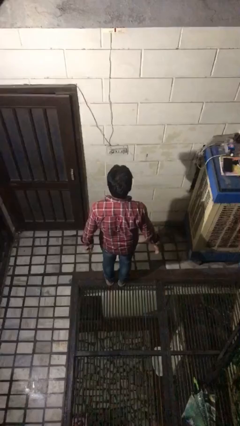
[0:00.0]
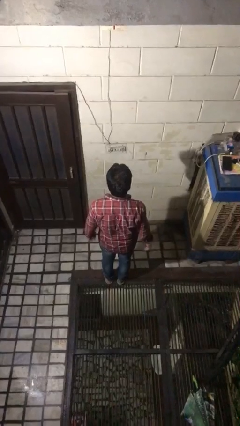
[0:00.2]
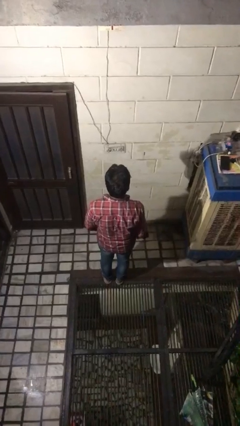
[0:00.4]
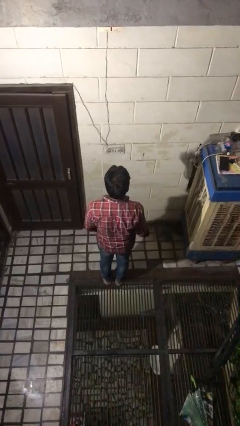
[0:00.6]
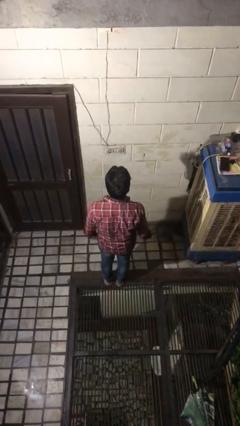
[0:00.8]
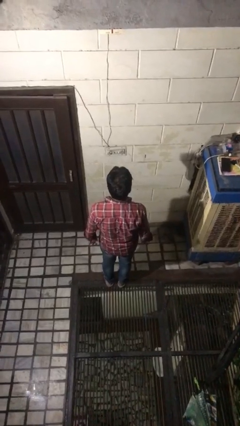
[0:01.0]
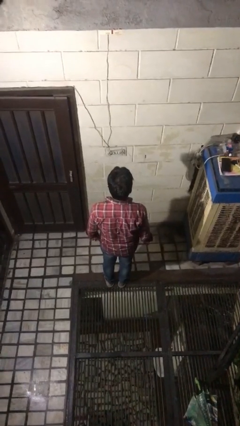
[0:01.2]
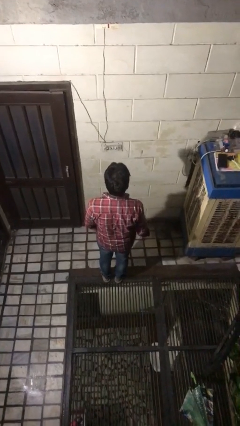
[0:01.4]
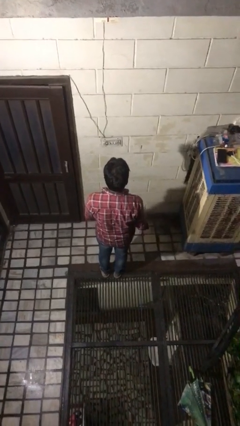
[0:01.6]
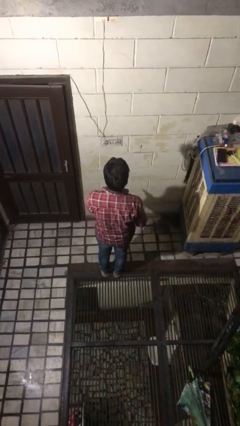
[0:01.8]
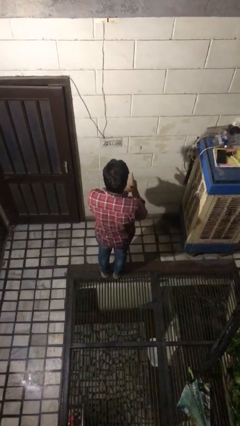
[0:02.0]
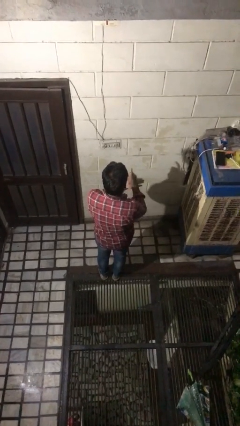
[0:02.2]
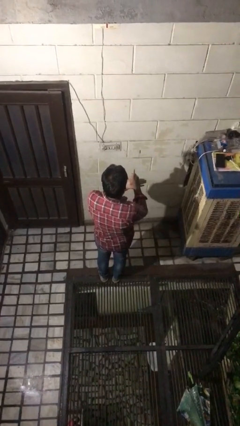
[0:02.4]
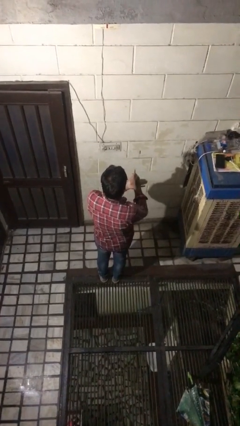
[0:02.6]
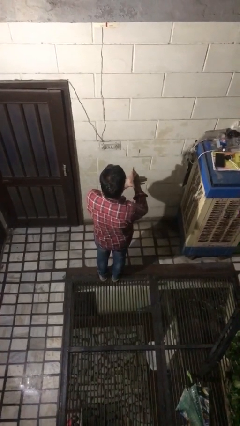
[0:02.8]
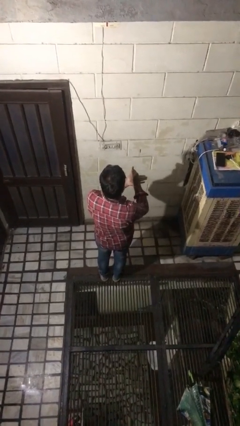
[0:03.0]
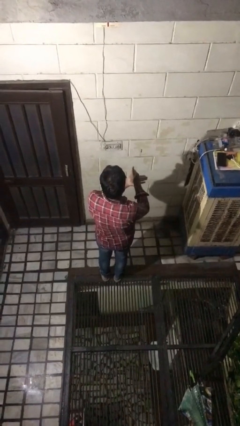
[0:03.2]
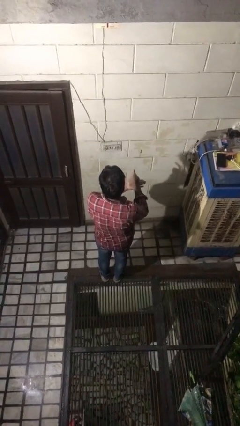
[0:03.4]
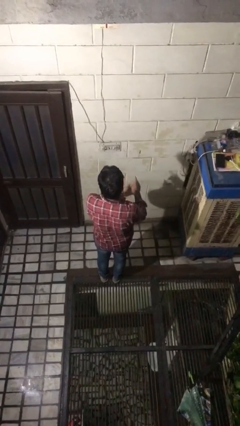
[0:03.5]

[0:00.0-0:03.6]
person gestures number one

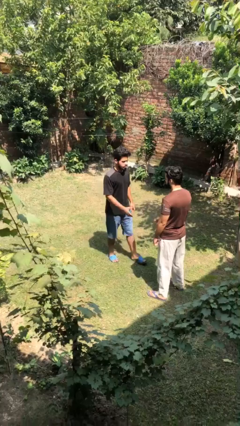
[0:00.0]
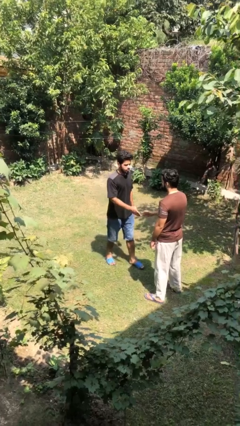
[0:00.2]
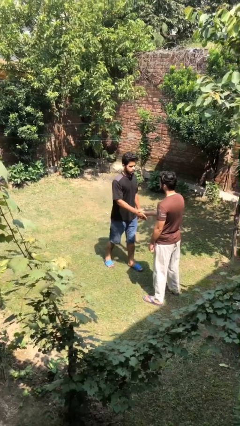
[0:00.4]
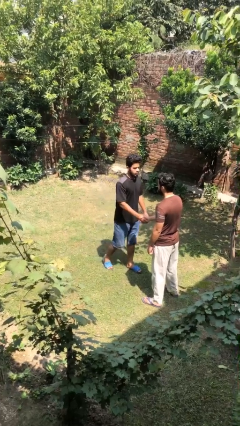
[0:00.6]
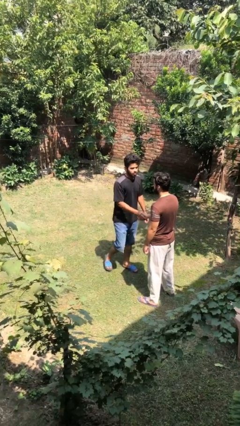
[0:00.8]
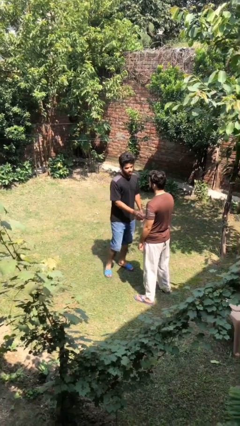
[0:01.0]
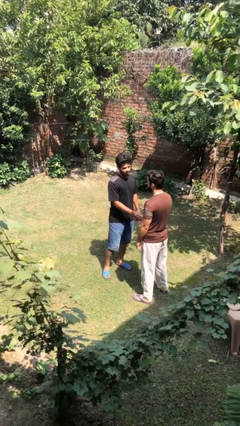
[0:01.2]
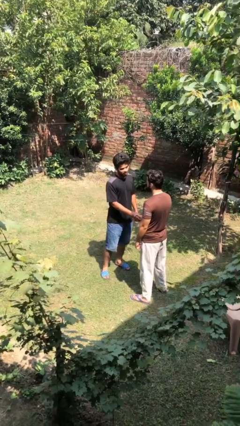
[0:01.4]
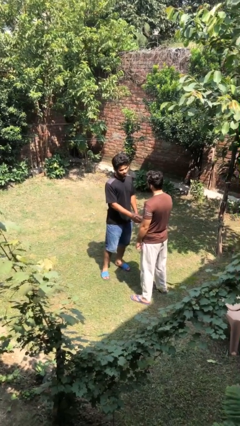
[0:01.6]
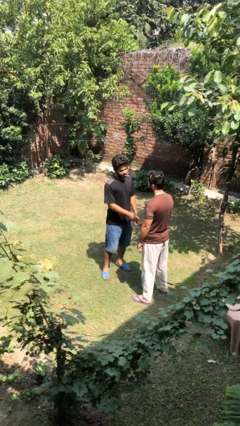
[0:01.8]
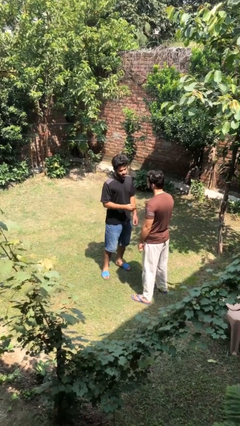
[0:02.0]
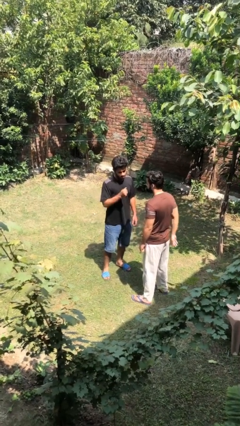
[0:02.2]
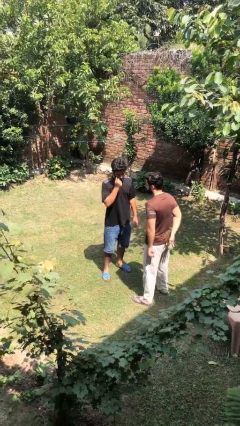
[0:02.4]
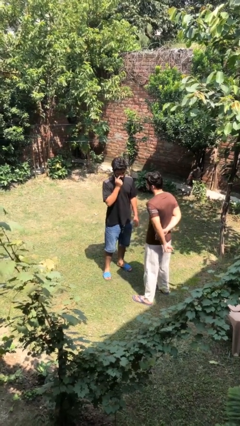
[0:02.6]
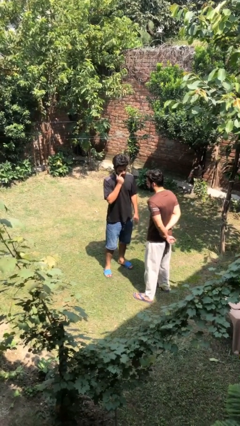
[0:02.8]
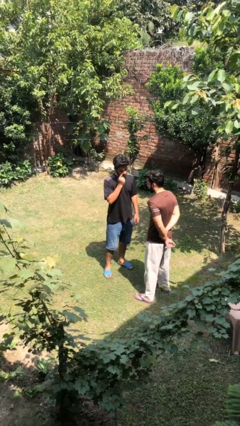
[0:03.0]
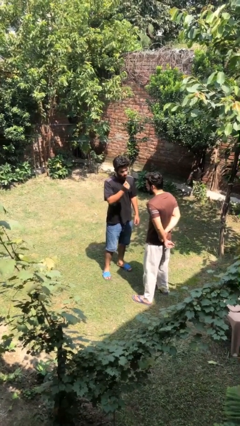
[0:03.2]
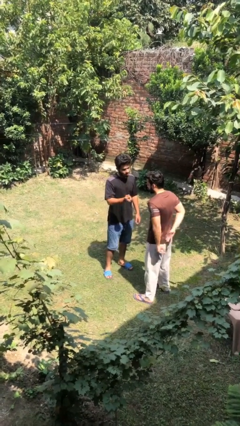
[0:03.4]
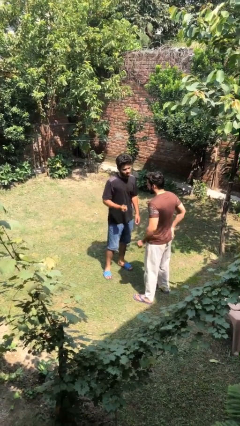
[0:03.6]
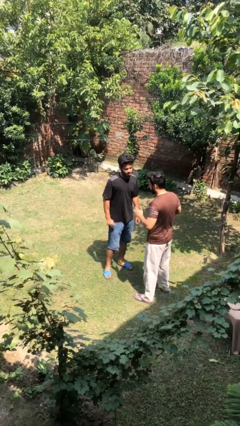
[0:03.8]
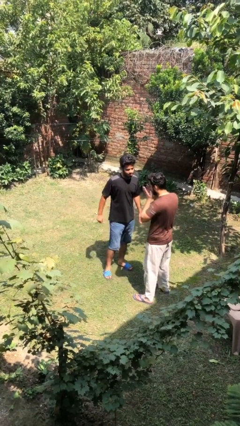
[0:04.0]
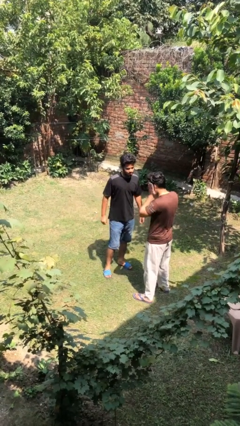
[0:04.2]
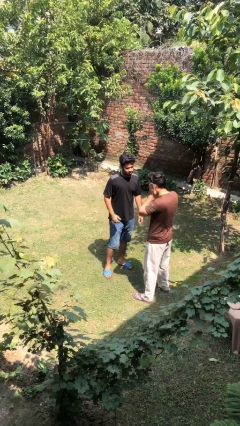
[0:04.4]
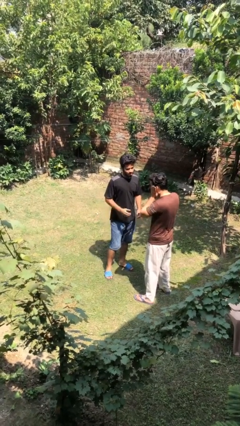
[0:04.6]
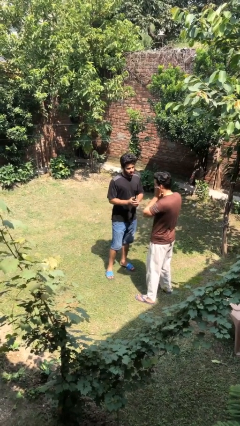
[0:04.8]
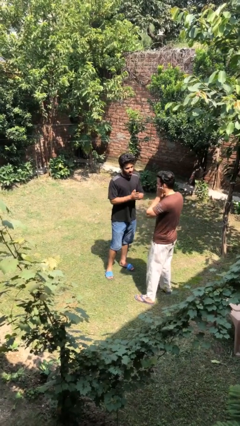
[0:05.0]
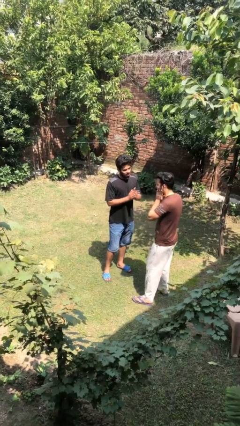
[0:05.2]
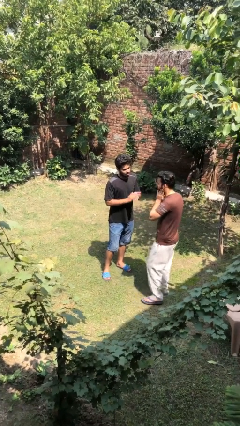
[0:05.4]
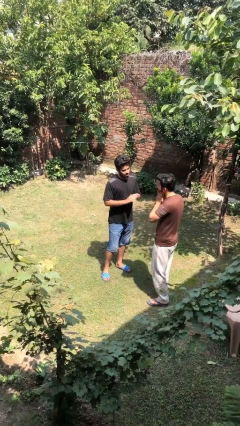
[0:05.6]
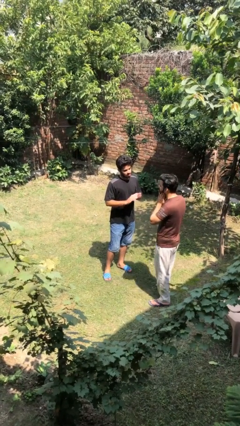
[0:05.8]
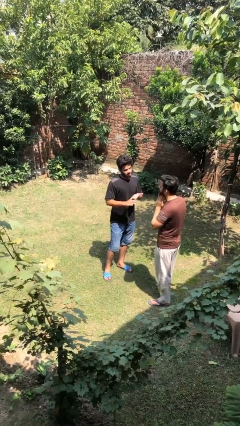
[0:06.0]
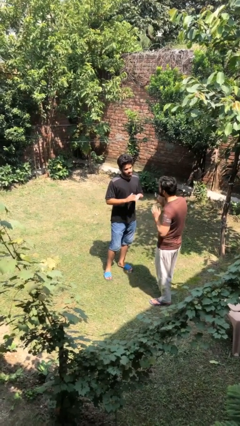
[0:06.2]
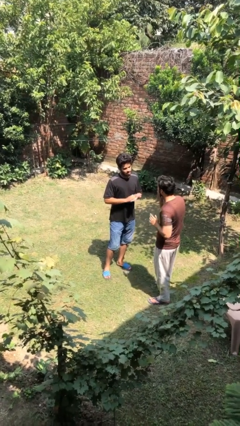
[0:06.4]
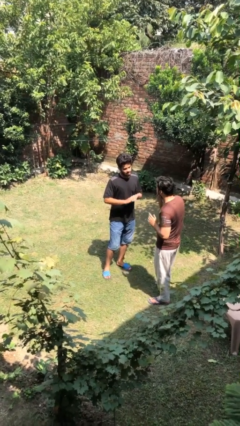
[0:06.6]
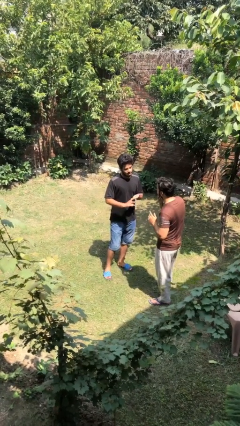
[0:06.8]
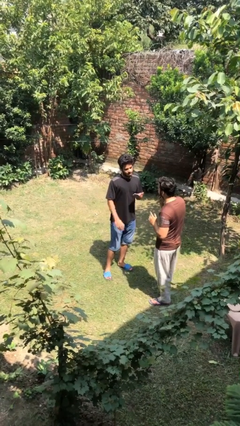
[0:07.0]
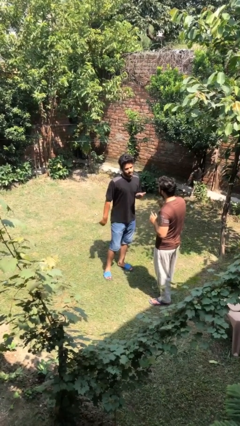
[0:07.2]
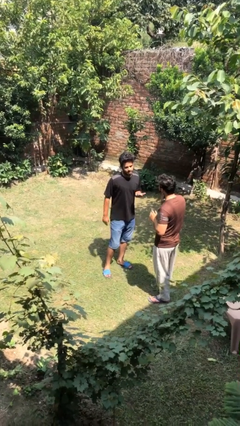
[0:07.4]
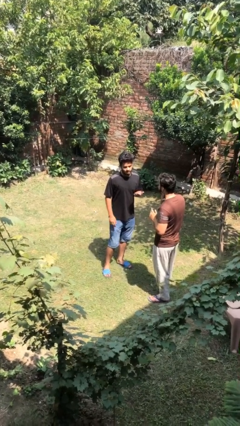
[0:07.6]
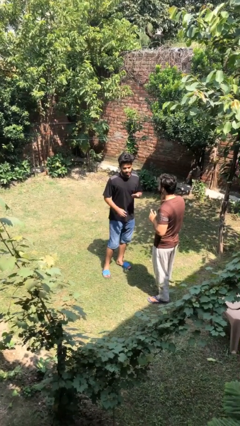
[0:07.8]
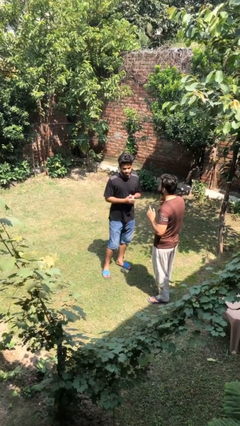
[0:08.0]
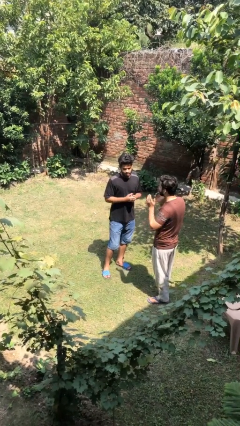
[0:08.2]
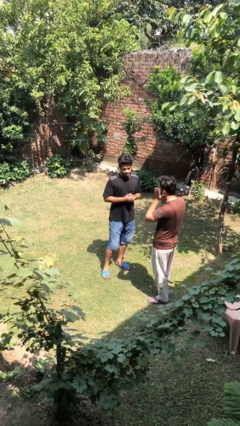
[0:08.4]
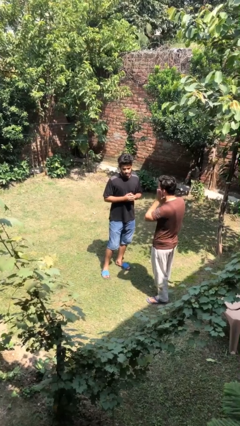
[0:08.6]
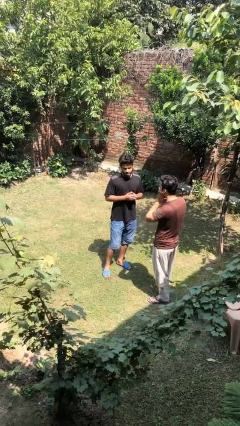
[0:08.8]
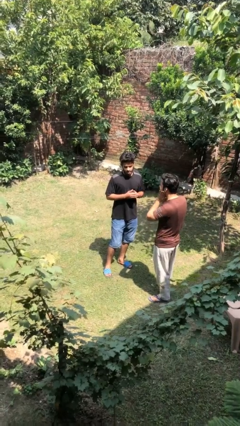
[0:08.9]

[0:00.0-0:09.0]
person shakes hand

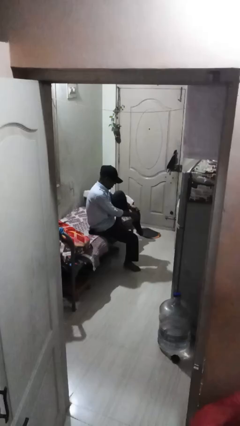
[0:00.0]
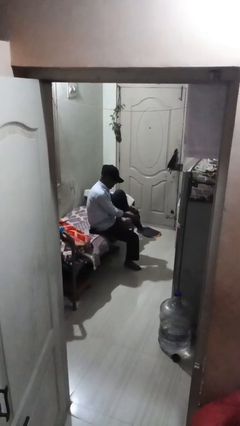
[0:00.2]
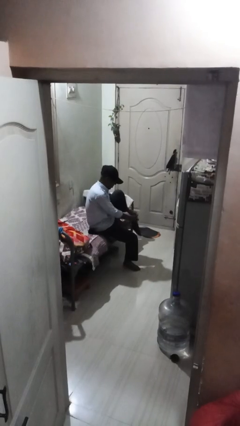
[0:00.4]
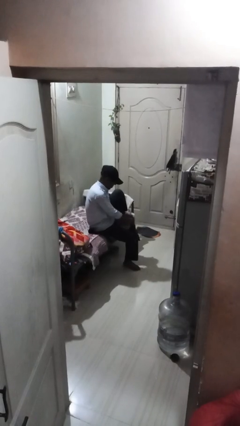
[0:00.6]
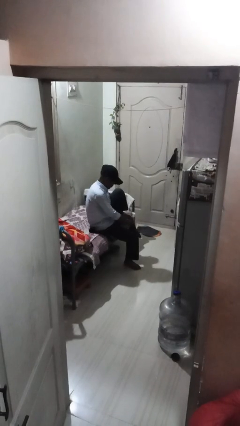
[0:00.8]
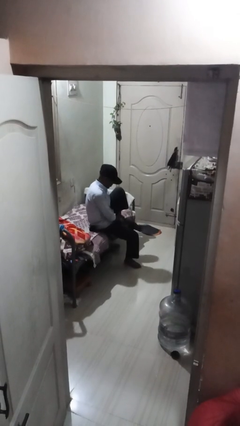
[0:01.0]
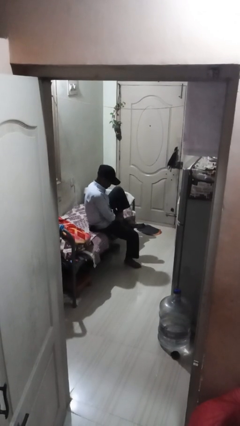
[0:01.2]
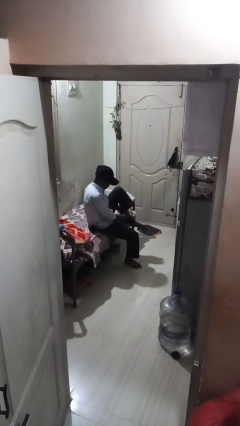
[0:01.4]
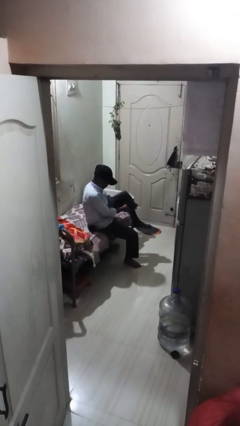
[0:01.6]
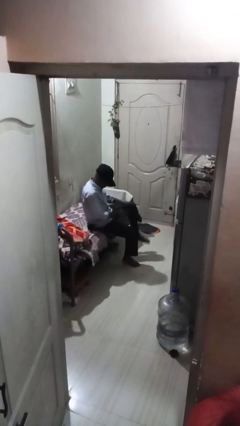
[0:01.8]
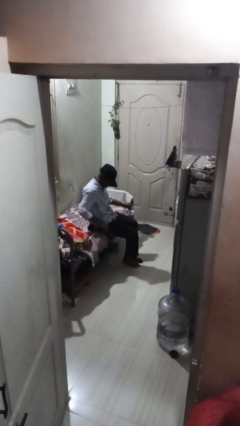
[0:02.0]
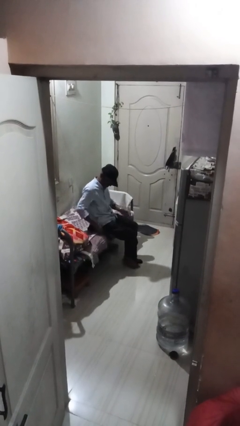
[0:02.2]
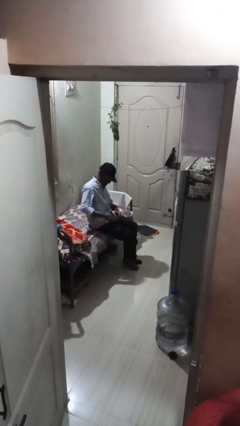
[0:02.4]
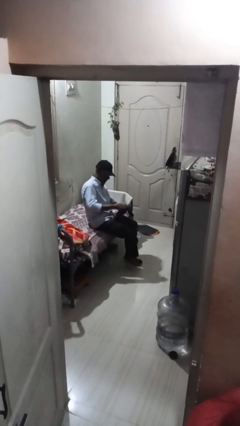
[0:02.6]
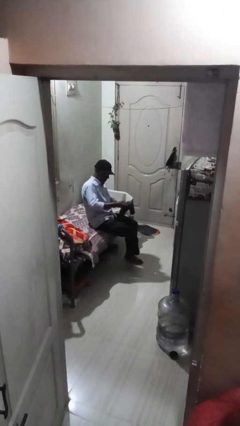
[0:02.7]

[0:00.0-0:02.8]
person puts on socks

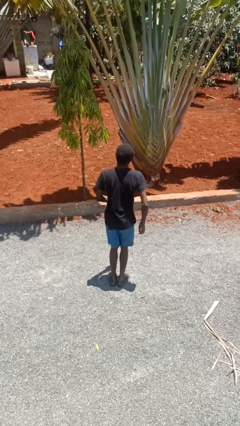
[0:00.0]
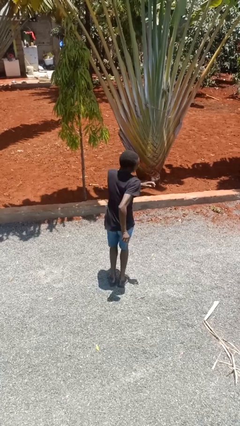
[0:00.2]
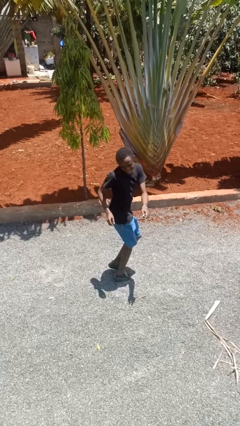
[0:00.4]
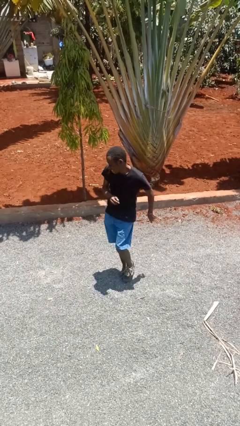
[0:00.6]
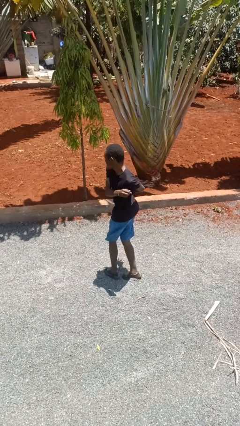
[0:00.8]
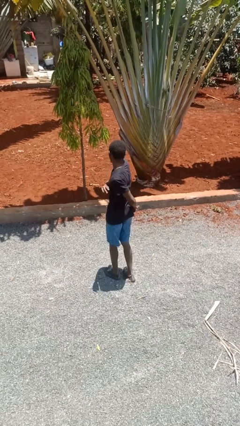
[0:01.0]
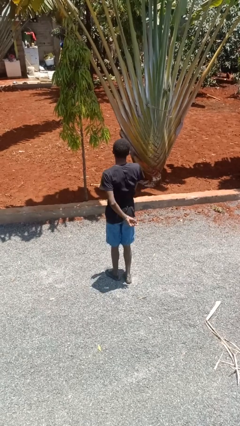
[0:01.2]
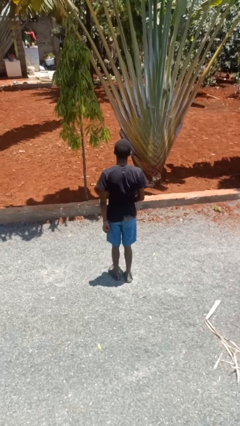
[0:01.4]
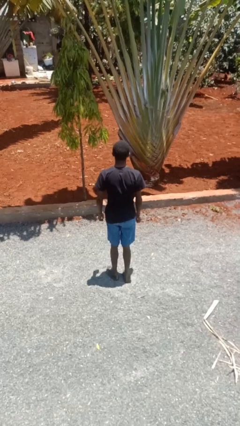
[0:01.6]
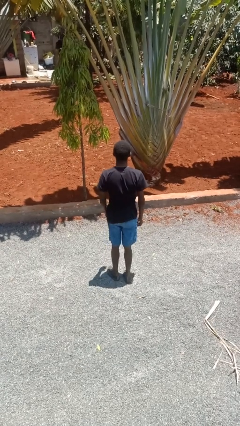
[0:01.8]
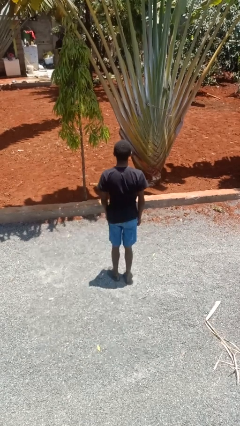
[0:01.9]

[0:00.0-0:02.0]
person twirls

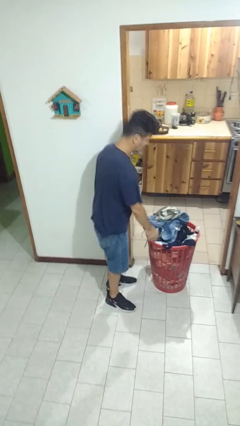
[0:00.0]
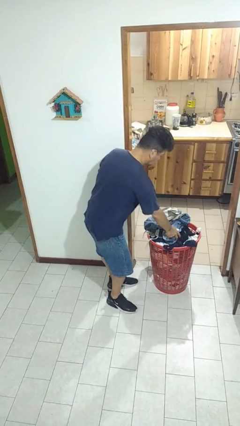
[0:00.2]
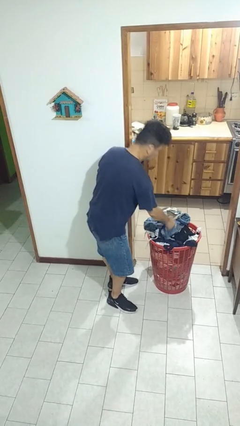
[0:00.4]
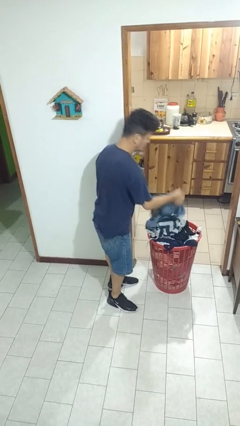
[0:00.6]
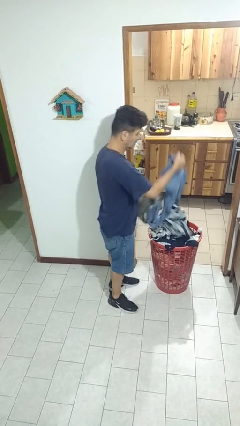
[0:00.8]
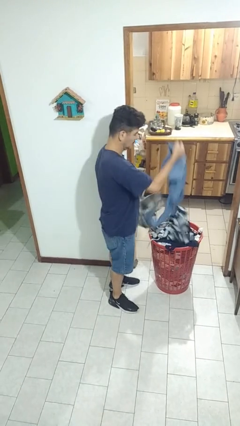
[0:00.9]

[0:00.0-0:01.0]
person takes object from basket
